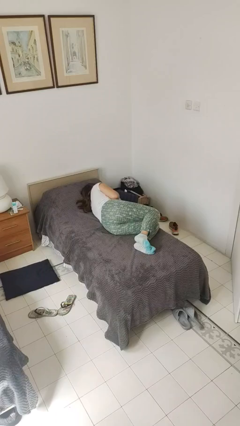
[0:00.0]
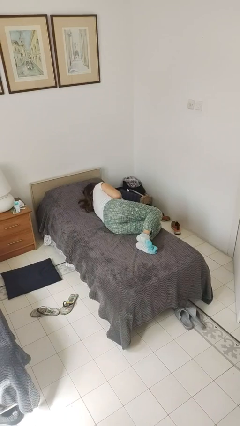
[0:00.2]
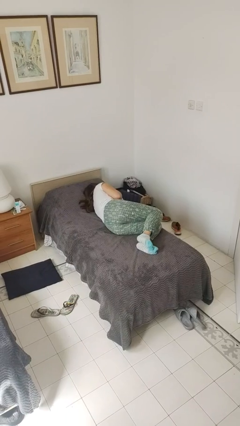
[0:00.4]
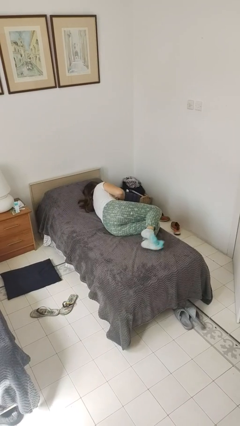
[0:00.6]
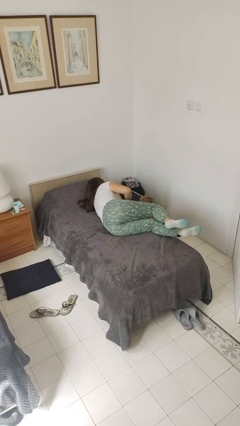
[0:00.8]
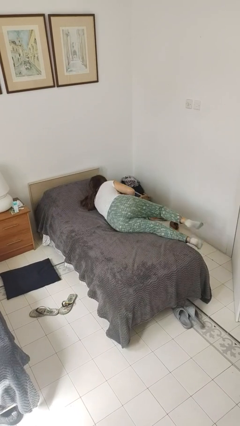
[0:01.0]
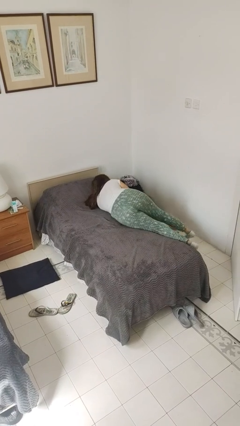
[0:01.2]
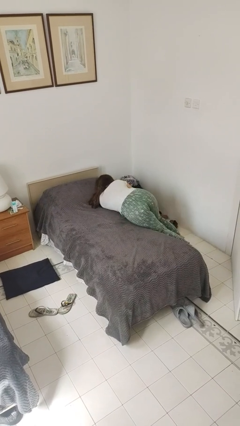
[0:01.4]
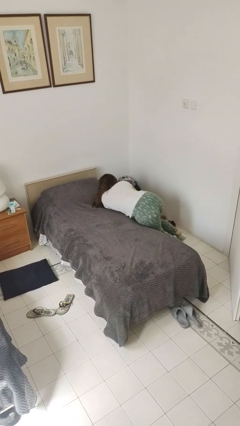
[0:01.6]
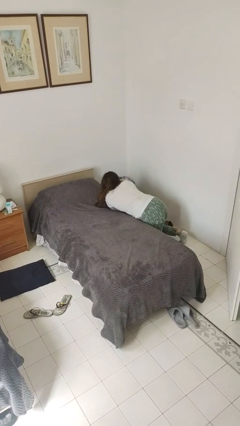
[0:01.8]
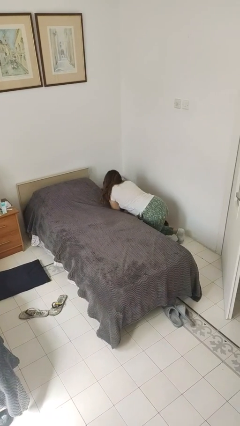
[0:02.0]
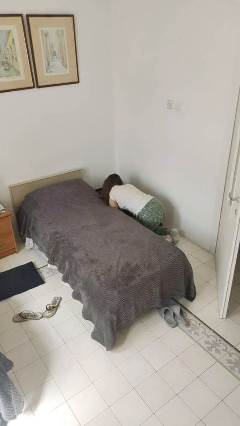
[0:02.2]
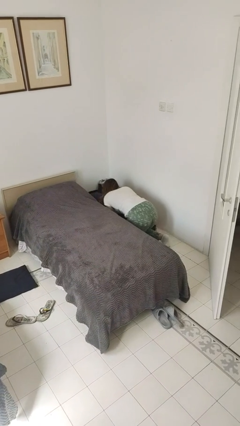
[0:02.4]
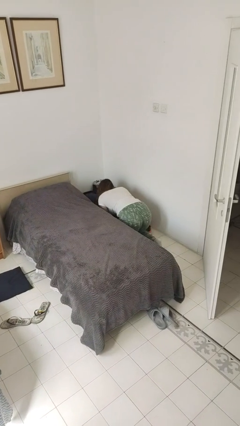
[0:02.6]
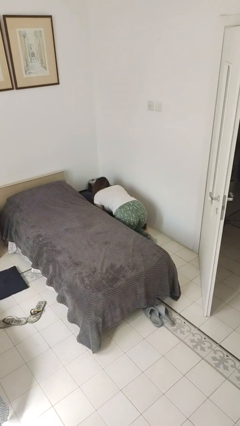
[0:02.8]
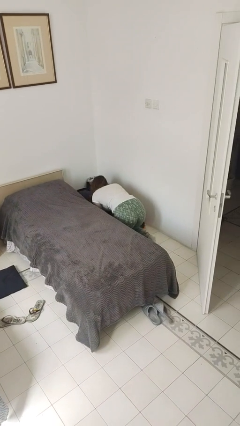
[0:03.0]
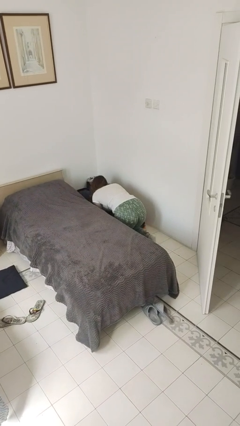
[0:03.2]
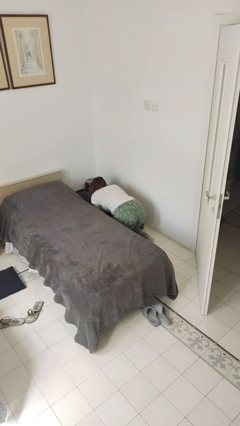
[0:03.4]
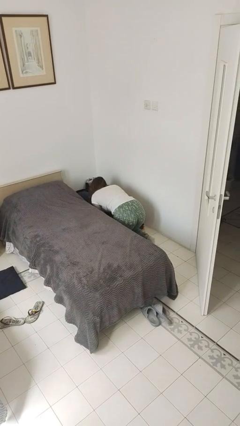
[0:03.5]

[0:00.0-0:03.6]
person stands up from floor

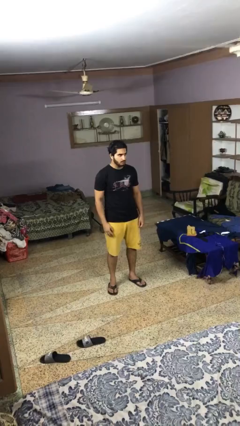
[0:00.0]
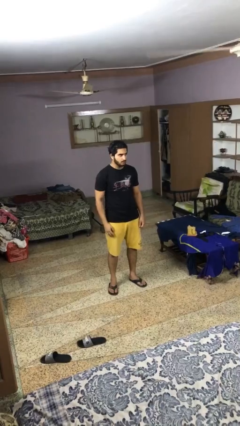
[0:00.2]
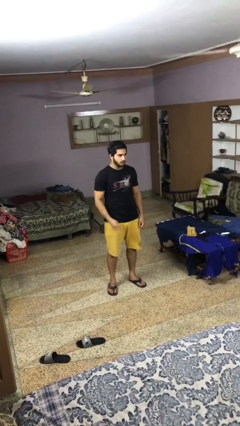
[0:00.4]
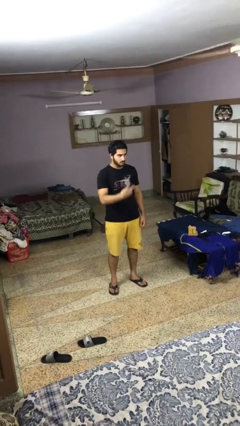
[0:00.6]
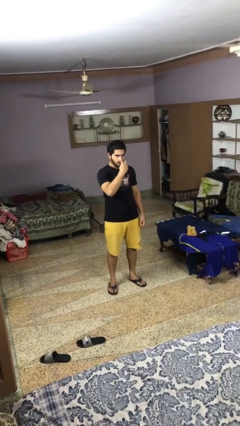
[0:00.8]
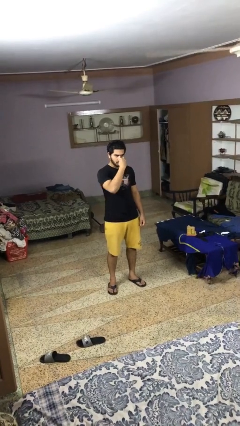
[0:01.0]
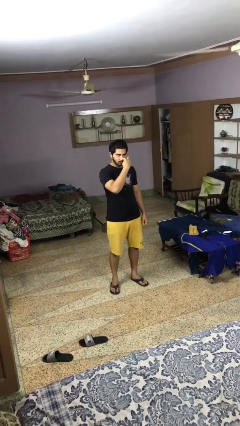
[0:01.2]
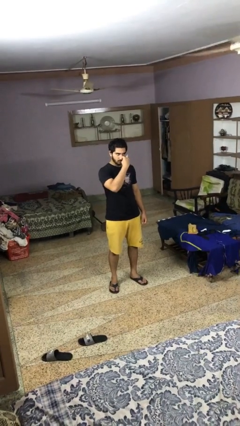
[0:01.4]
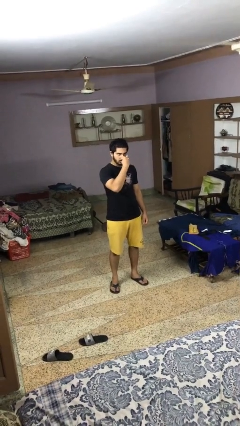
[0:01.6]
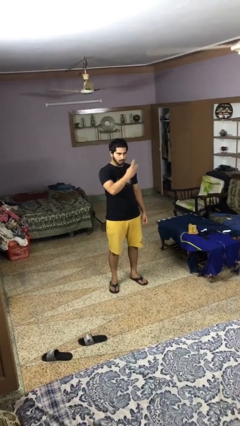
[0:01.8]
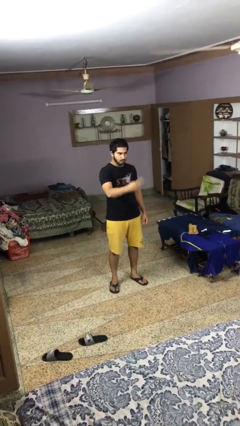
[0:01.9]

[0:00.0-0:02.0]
person gestures watch closely

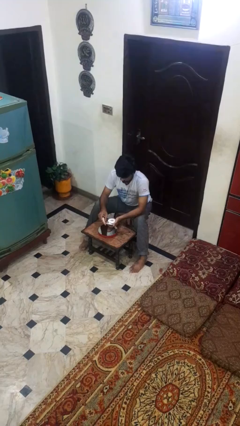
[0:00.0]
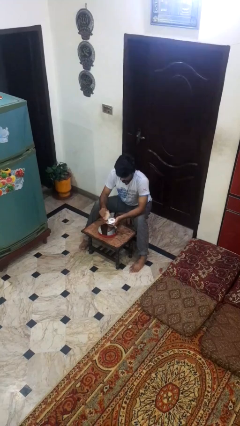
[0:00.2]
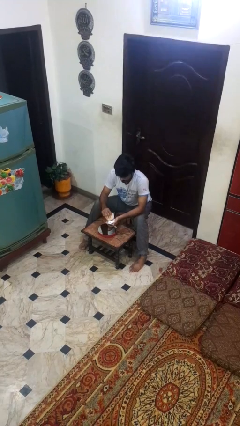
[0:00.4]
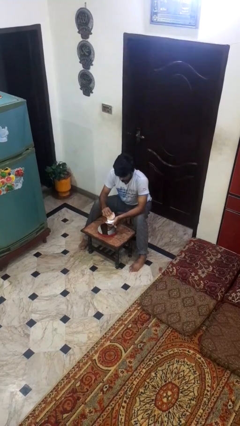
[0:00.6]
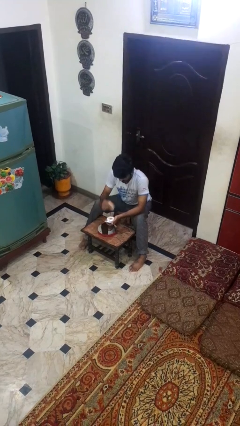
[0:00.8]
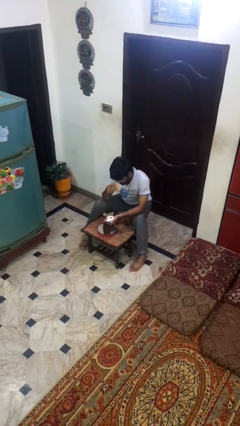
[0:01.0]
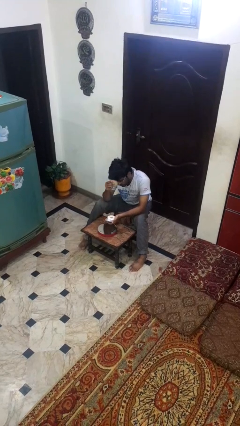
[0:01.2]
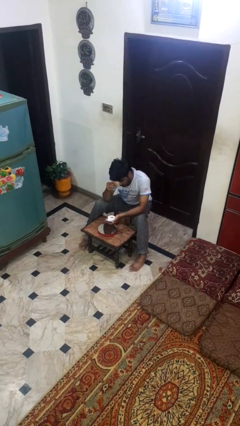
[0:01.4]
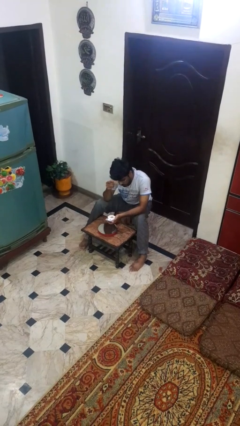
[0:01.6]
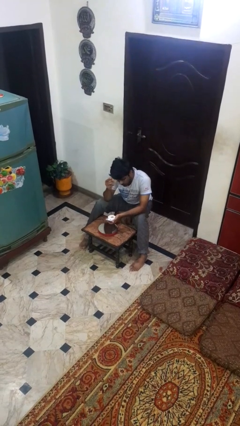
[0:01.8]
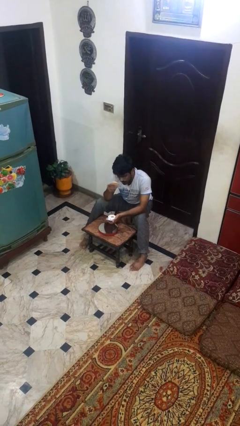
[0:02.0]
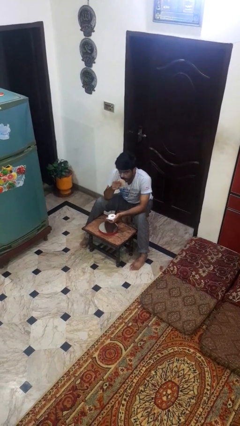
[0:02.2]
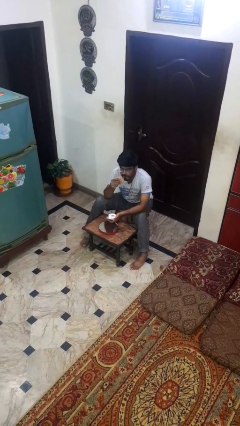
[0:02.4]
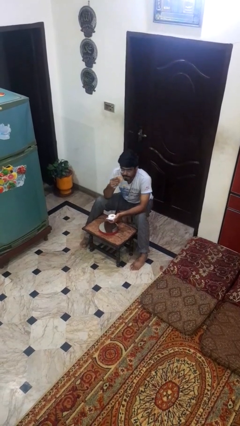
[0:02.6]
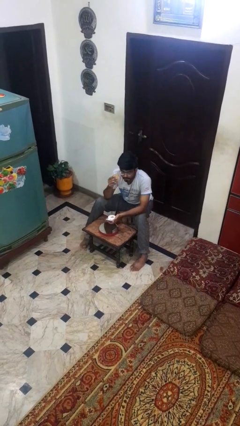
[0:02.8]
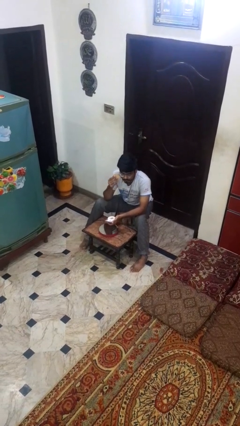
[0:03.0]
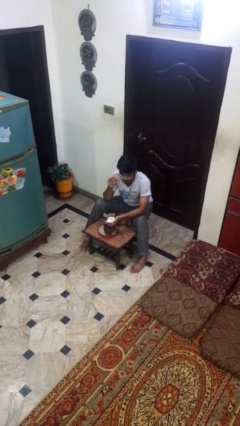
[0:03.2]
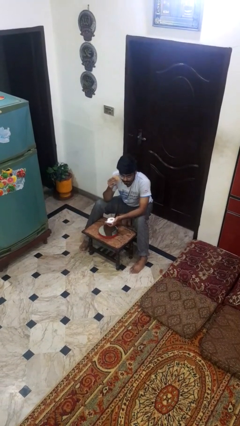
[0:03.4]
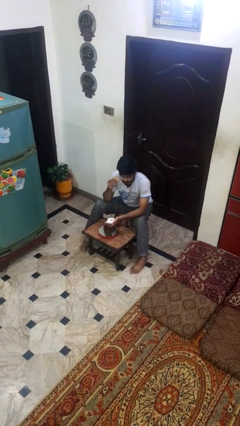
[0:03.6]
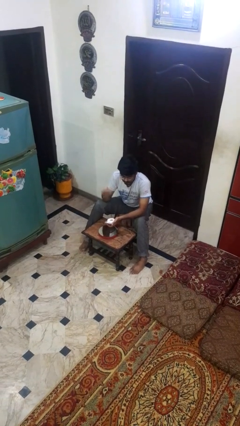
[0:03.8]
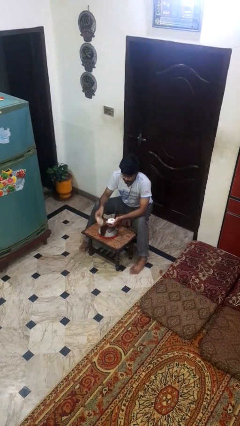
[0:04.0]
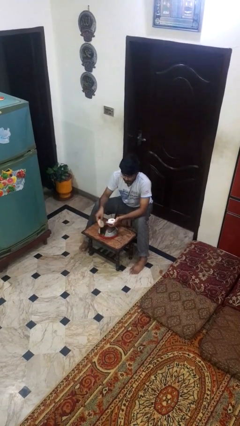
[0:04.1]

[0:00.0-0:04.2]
person applies foundation makeup

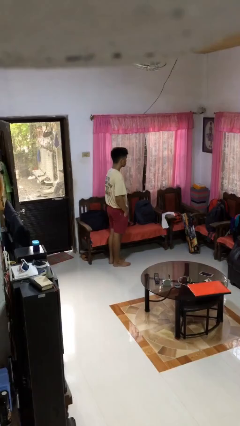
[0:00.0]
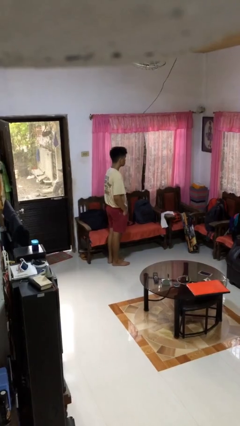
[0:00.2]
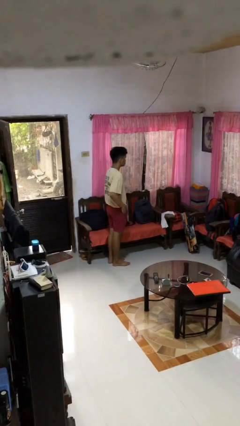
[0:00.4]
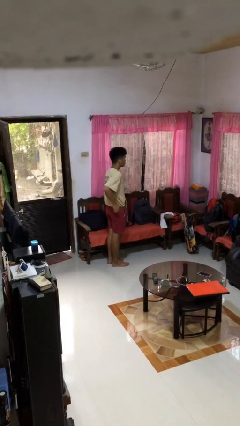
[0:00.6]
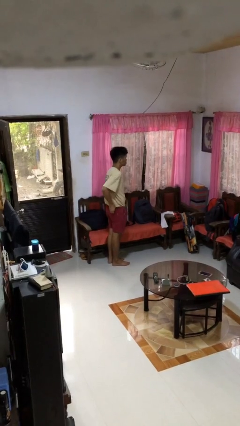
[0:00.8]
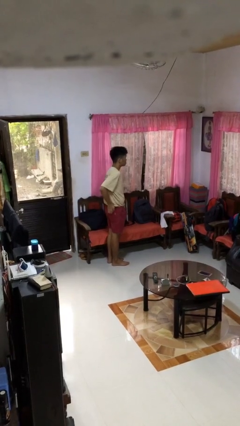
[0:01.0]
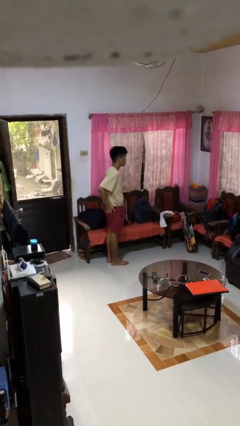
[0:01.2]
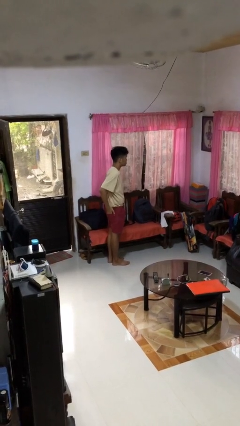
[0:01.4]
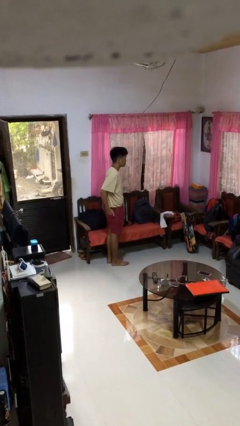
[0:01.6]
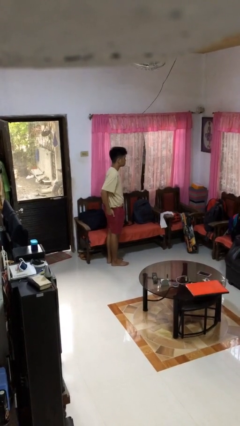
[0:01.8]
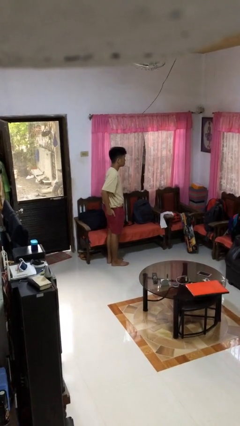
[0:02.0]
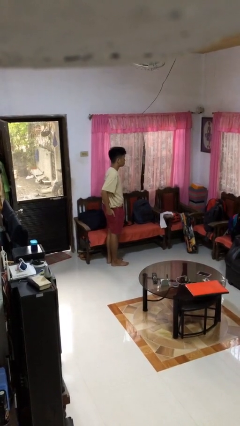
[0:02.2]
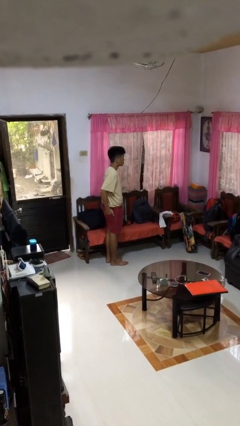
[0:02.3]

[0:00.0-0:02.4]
person puts hands in back pockets

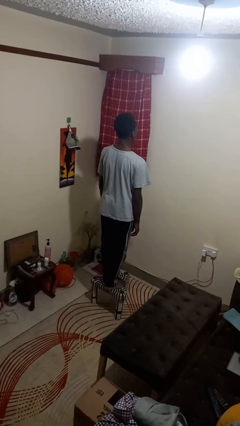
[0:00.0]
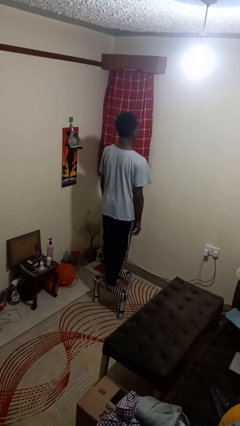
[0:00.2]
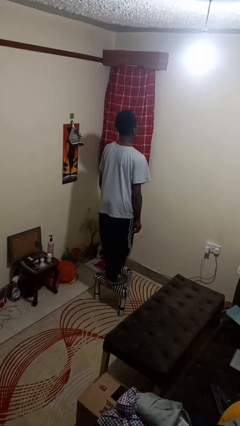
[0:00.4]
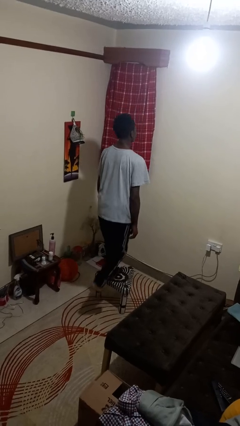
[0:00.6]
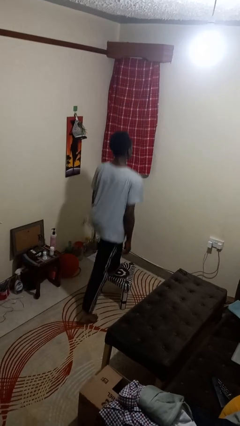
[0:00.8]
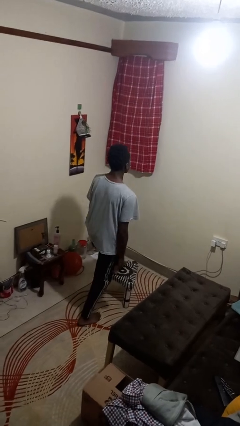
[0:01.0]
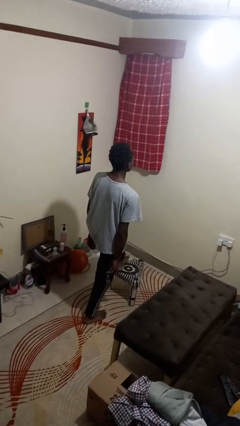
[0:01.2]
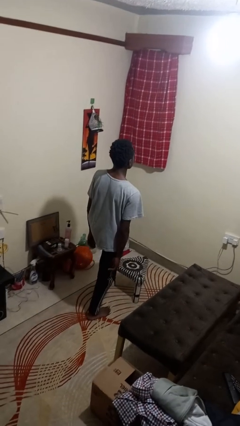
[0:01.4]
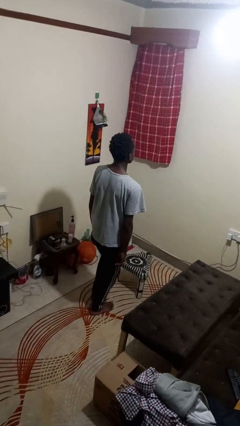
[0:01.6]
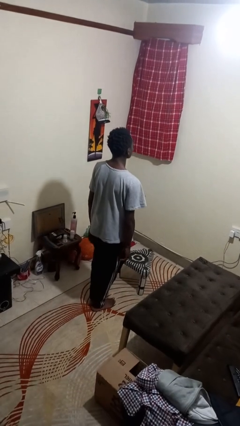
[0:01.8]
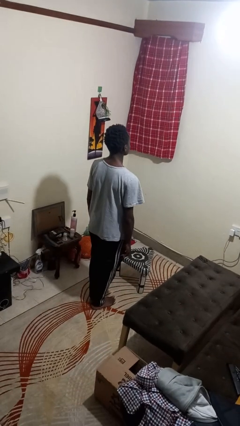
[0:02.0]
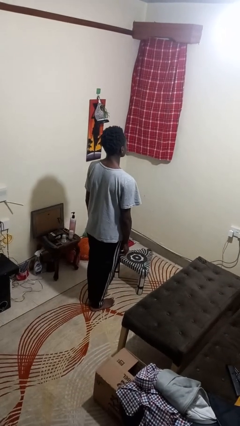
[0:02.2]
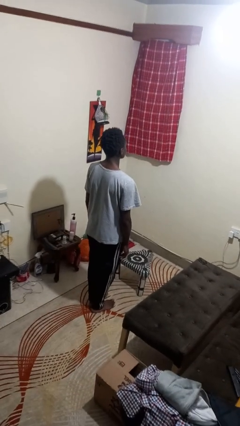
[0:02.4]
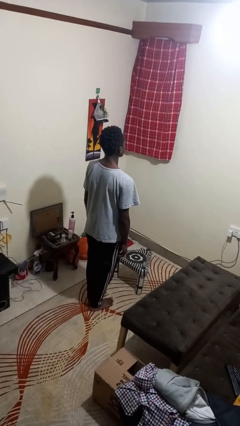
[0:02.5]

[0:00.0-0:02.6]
person climbs off chair

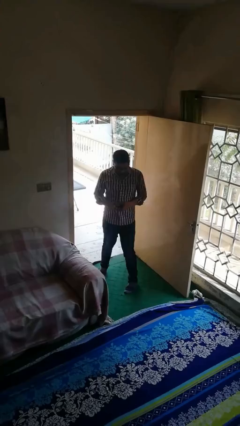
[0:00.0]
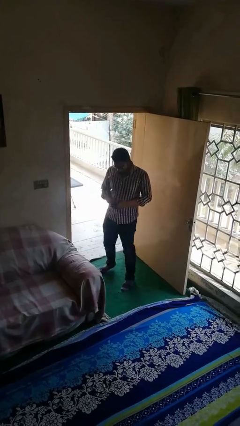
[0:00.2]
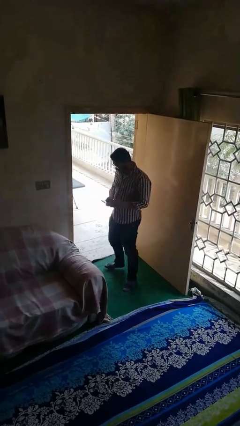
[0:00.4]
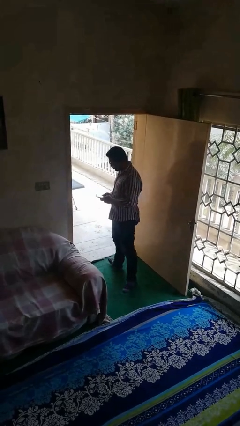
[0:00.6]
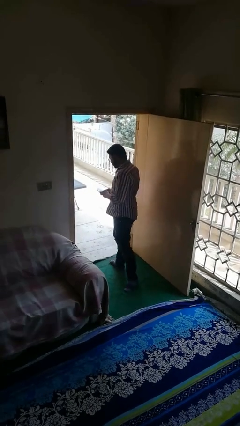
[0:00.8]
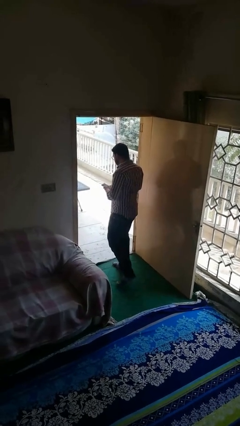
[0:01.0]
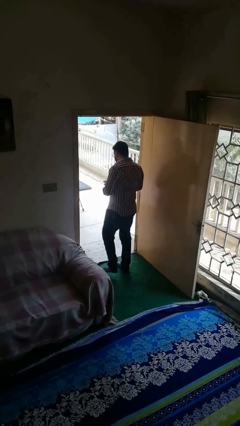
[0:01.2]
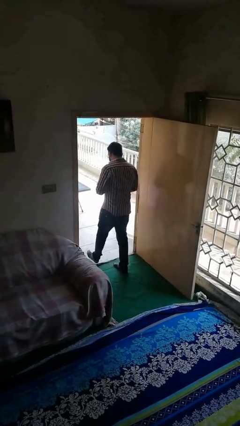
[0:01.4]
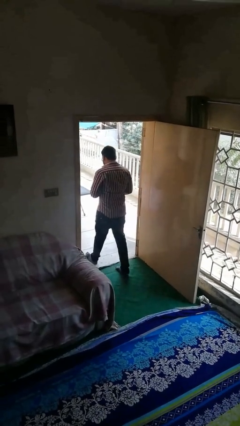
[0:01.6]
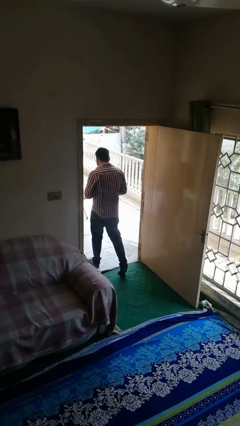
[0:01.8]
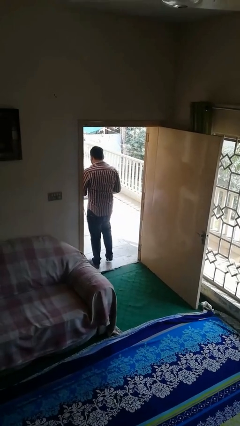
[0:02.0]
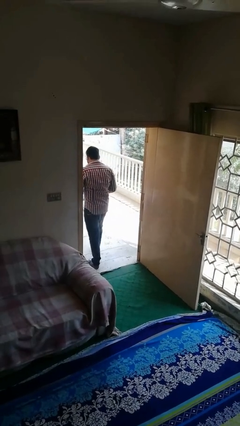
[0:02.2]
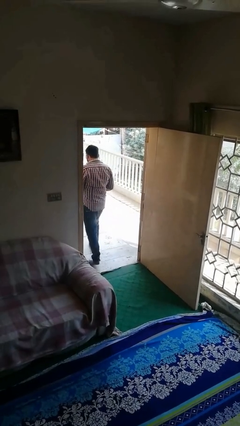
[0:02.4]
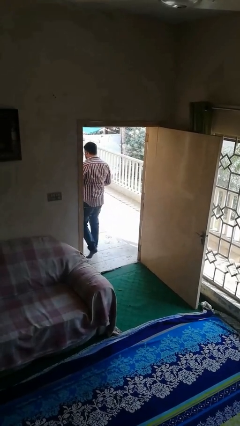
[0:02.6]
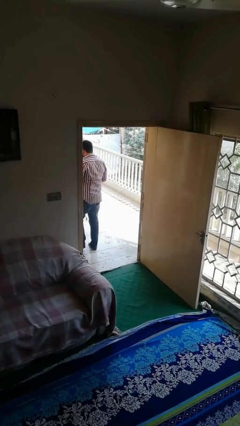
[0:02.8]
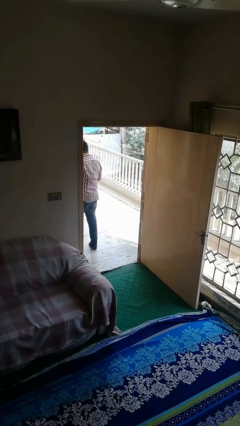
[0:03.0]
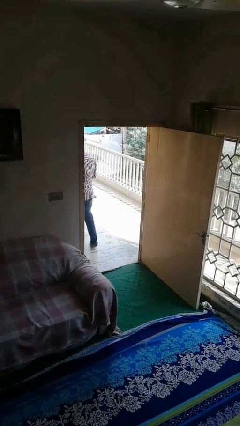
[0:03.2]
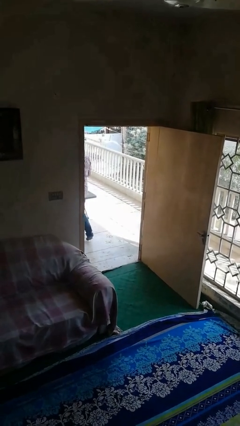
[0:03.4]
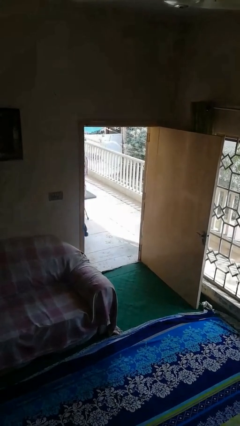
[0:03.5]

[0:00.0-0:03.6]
person exits scene through structure
